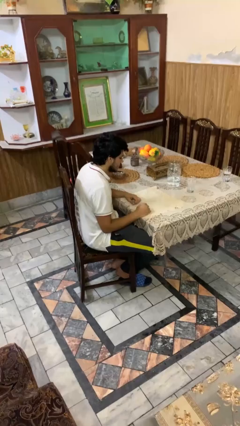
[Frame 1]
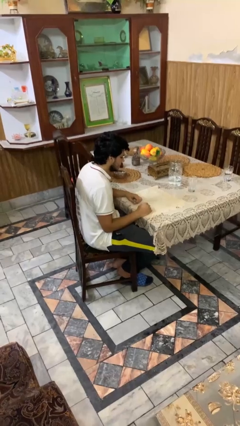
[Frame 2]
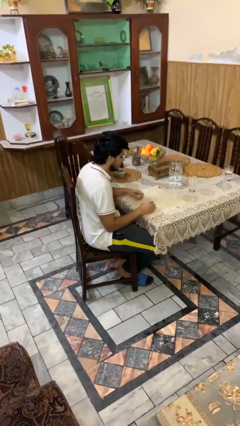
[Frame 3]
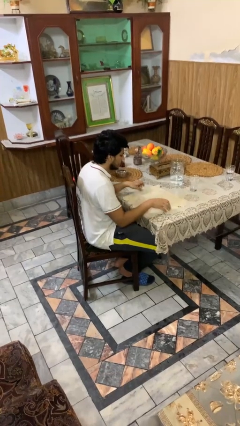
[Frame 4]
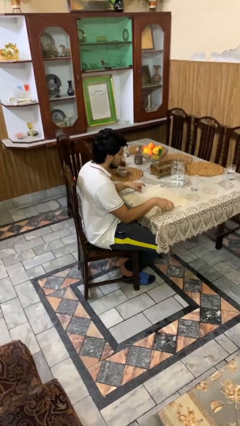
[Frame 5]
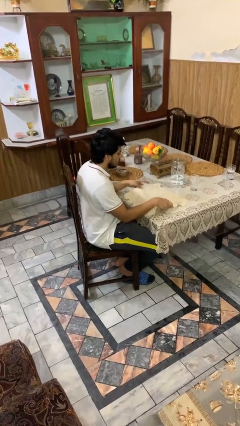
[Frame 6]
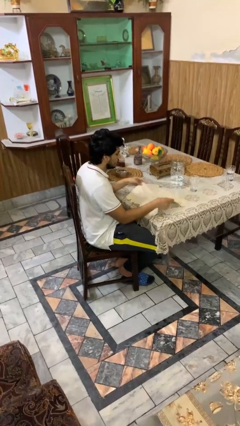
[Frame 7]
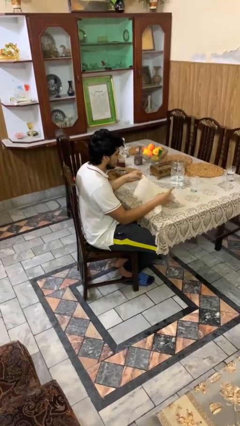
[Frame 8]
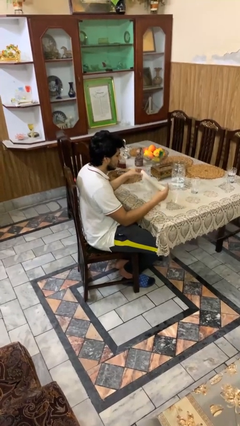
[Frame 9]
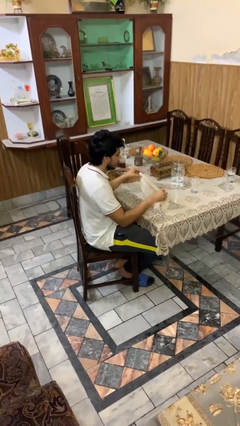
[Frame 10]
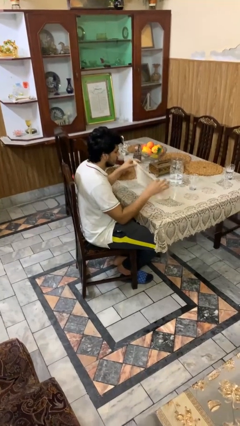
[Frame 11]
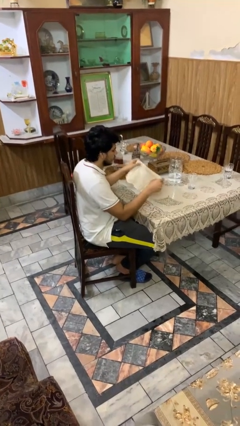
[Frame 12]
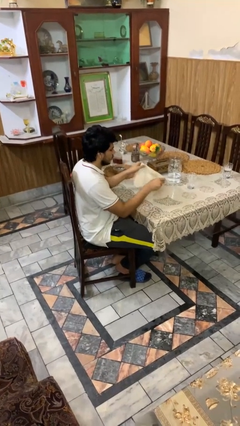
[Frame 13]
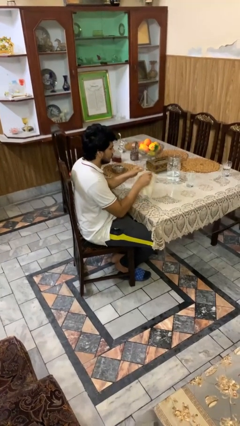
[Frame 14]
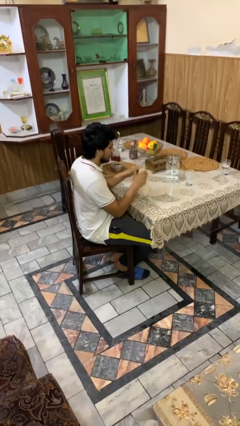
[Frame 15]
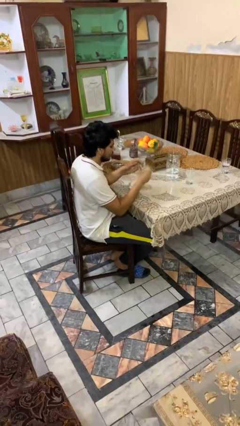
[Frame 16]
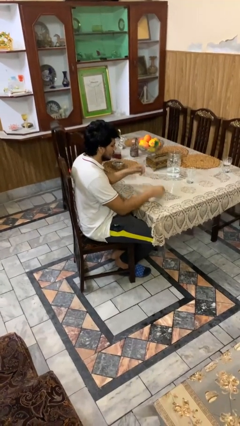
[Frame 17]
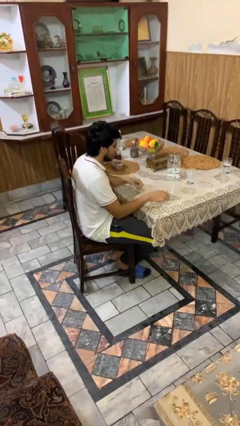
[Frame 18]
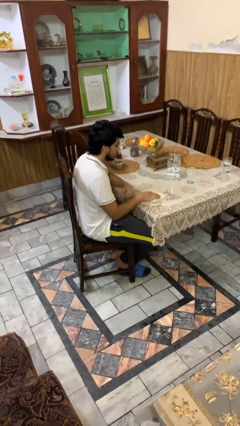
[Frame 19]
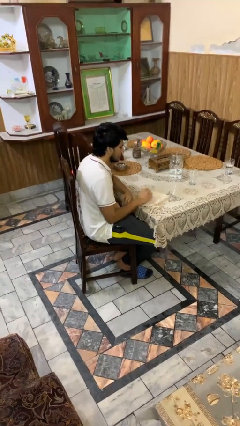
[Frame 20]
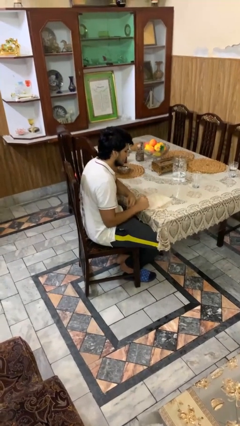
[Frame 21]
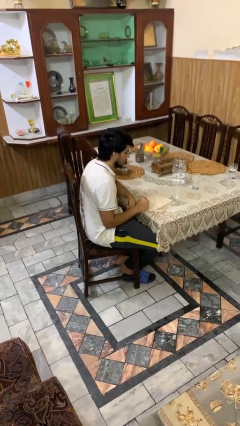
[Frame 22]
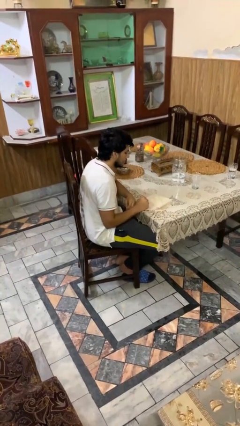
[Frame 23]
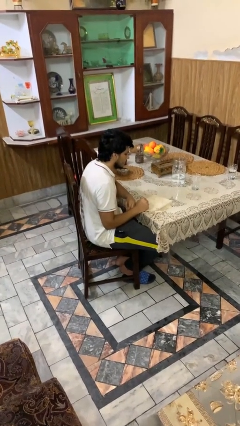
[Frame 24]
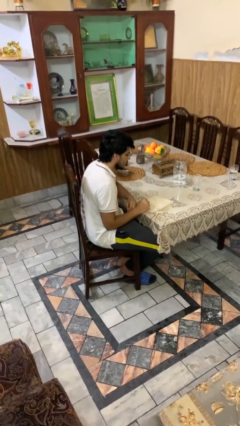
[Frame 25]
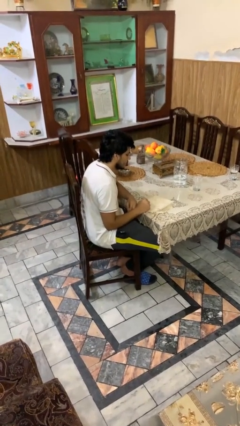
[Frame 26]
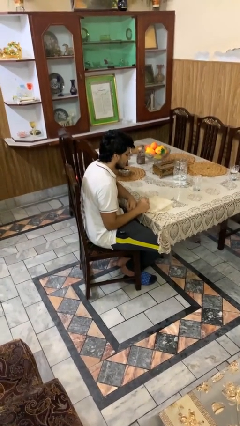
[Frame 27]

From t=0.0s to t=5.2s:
person folds tablecloth

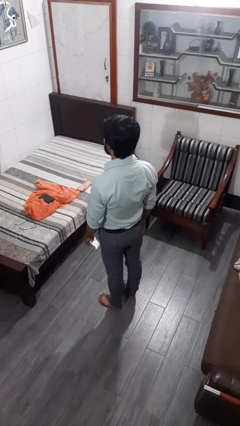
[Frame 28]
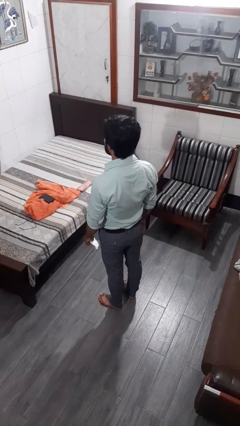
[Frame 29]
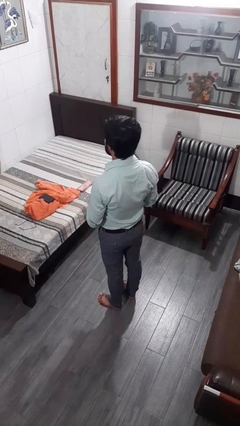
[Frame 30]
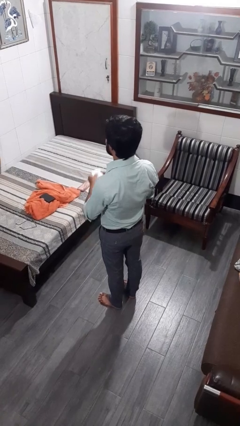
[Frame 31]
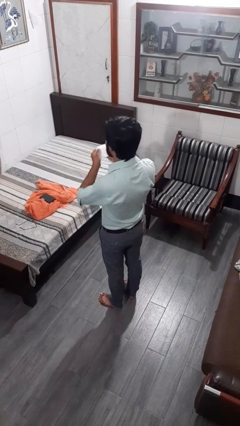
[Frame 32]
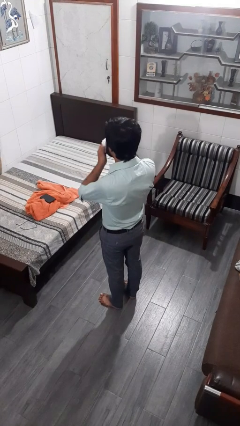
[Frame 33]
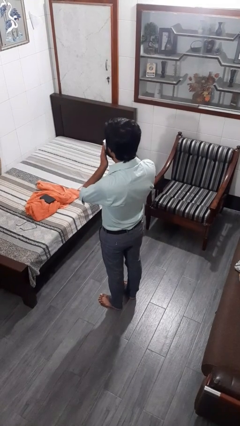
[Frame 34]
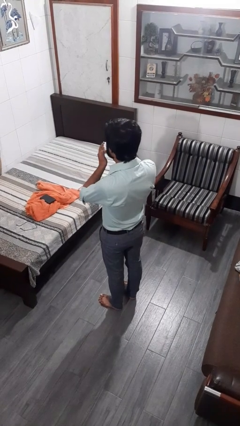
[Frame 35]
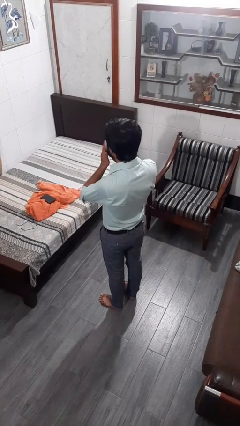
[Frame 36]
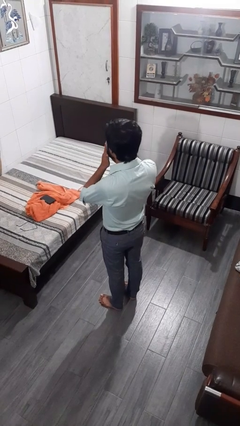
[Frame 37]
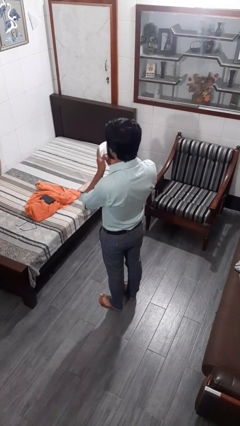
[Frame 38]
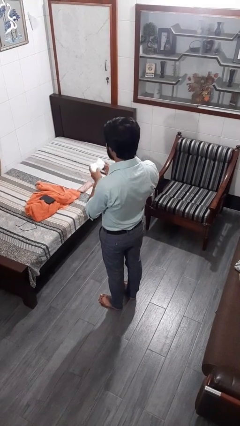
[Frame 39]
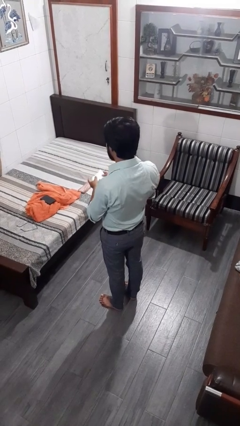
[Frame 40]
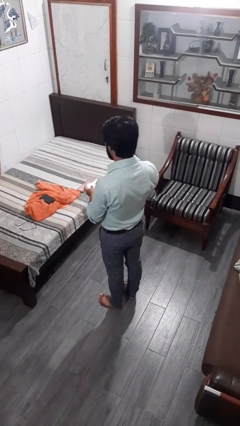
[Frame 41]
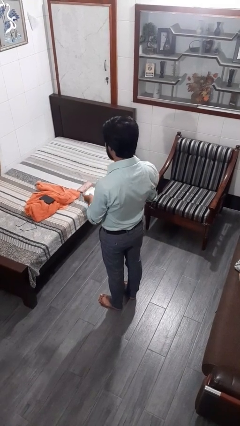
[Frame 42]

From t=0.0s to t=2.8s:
person blows nose

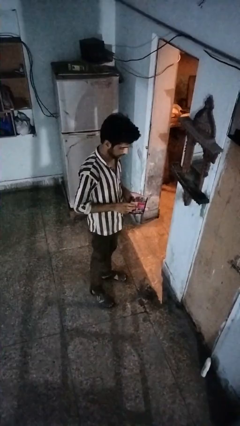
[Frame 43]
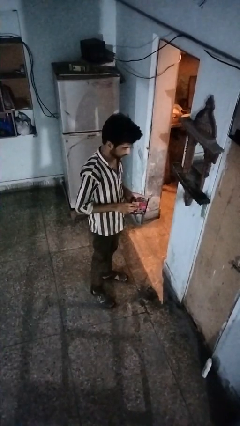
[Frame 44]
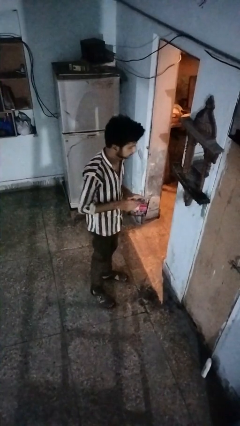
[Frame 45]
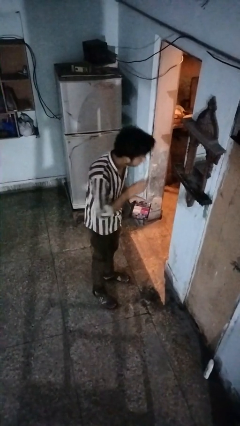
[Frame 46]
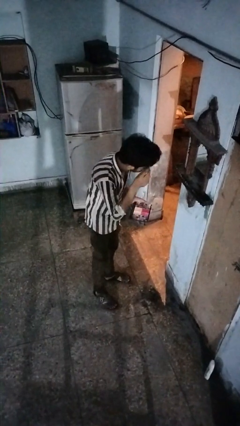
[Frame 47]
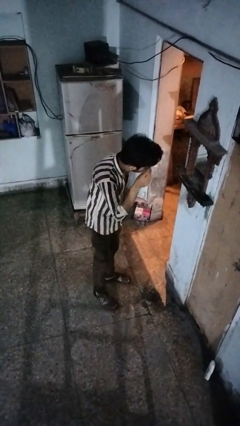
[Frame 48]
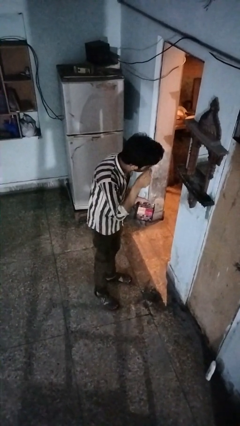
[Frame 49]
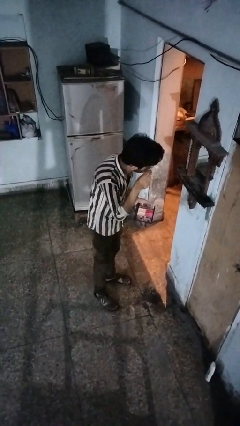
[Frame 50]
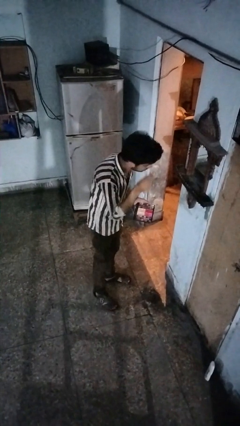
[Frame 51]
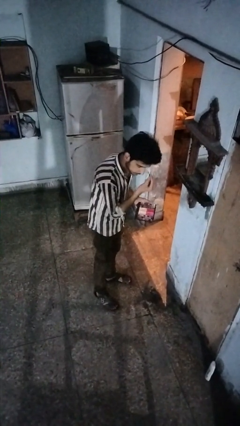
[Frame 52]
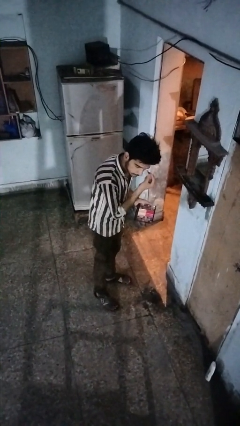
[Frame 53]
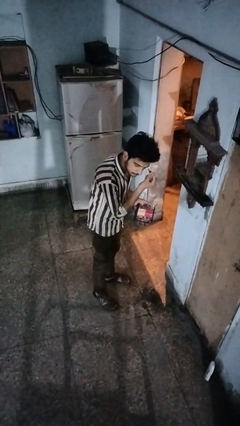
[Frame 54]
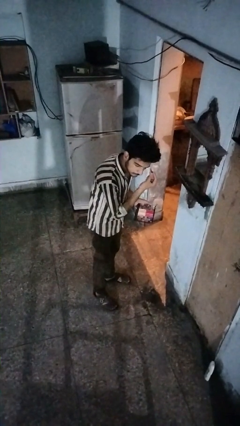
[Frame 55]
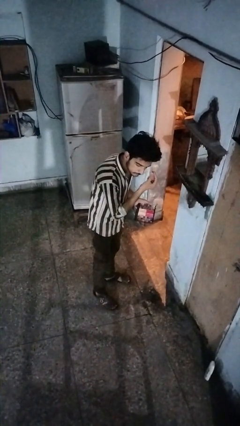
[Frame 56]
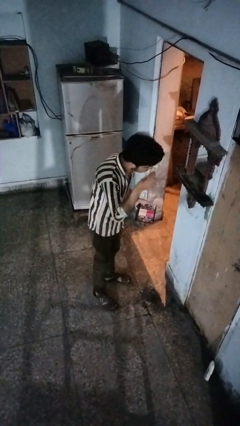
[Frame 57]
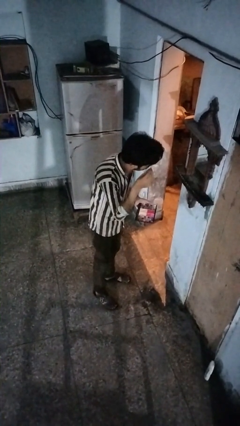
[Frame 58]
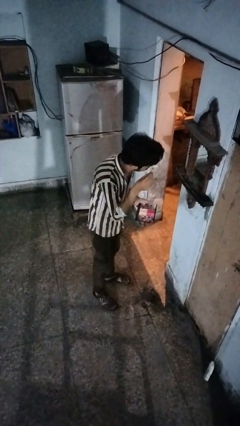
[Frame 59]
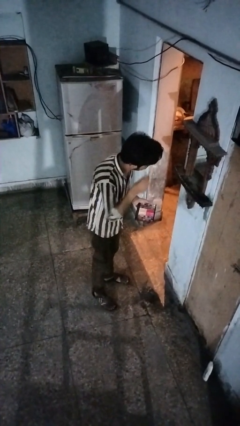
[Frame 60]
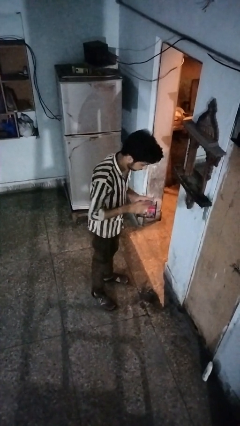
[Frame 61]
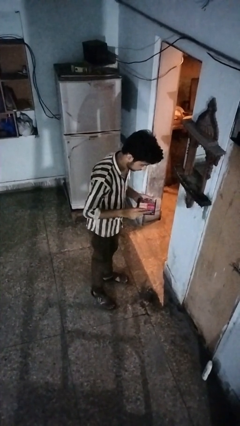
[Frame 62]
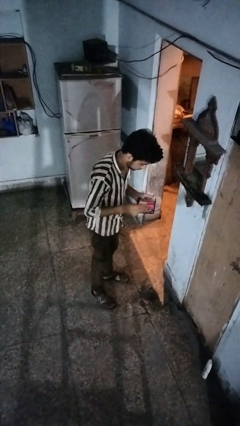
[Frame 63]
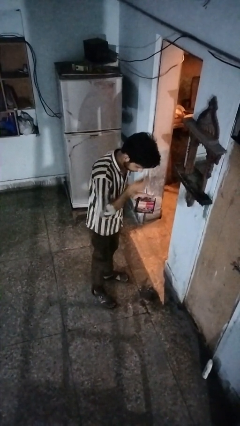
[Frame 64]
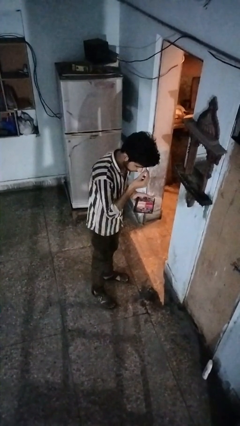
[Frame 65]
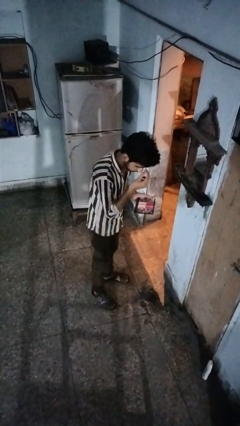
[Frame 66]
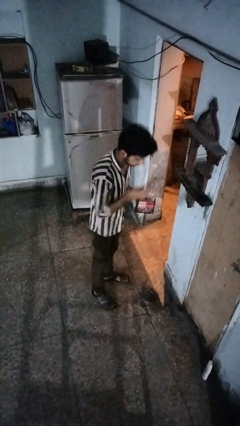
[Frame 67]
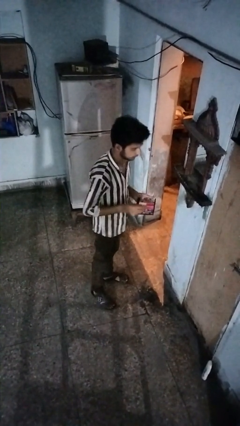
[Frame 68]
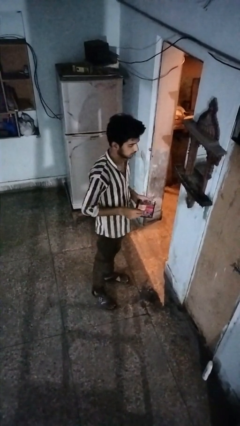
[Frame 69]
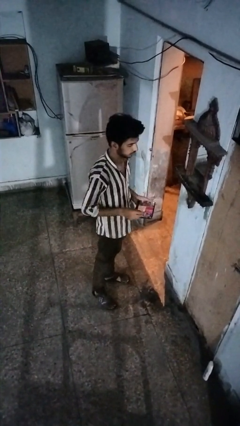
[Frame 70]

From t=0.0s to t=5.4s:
person applies eye makeup

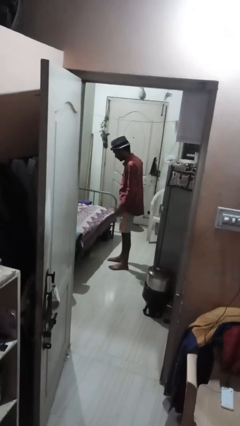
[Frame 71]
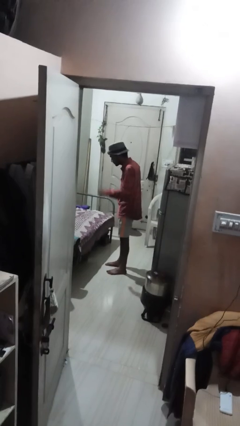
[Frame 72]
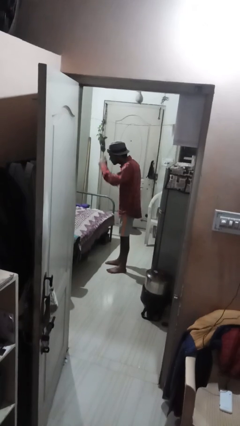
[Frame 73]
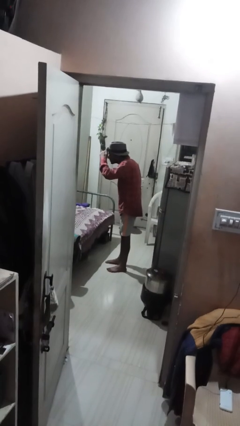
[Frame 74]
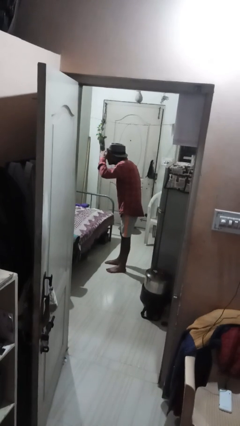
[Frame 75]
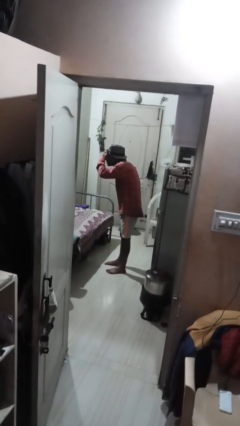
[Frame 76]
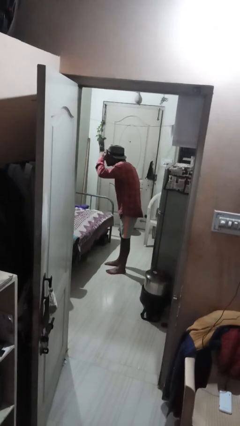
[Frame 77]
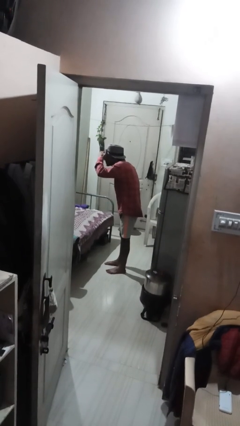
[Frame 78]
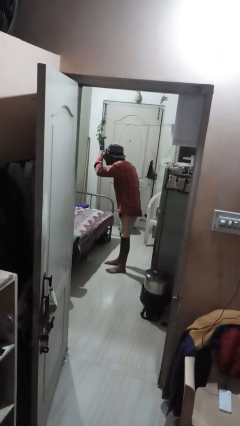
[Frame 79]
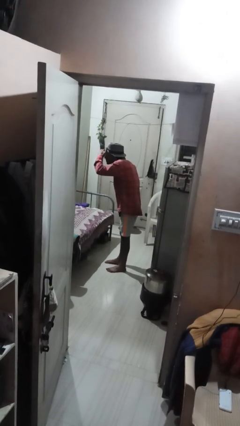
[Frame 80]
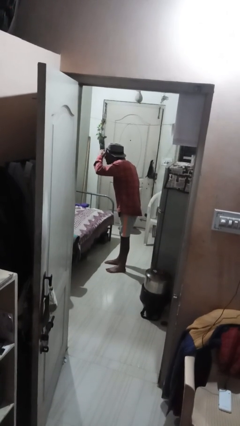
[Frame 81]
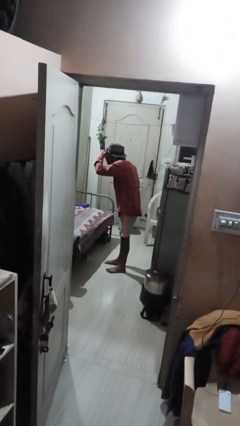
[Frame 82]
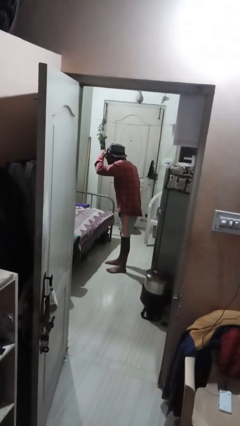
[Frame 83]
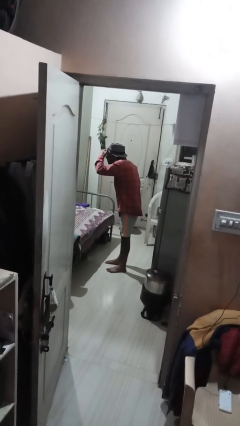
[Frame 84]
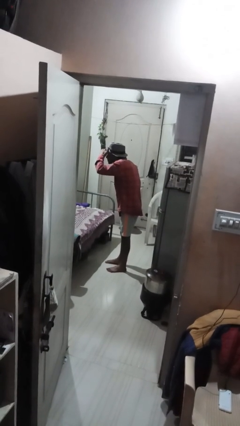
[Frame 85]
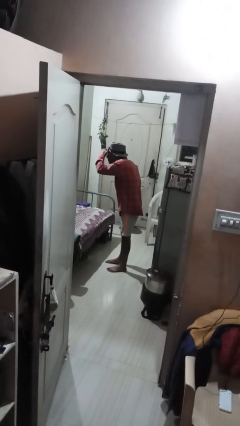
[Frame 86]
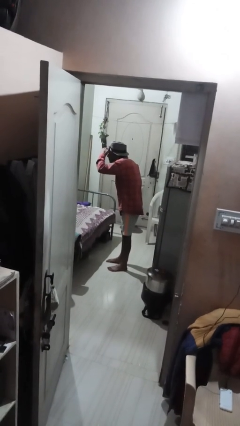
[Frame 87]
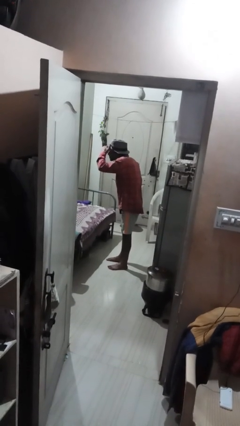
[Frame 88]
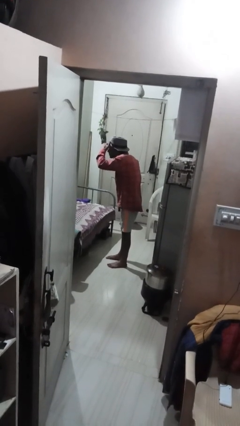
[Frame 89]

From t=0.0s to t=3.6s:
person shades eyes

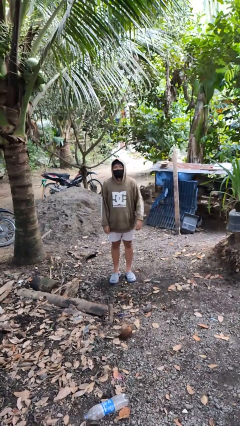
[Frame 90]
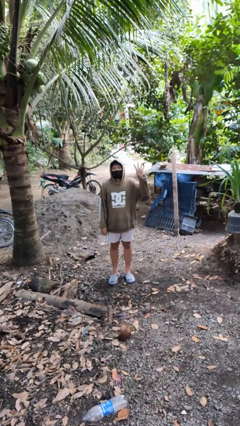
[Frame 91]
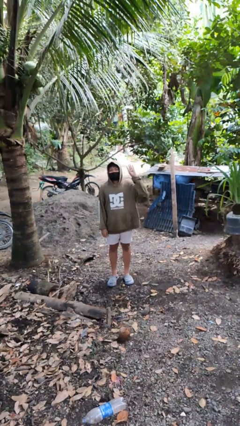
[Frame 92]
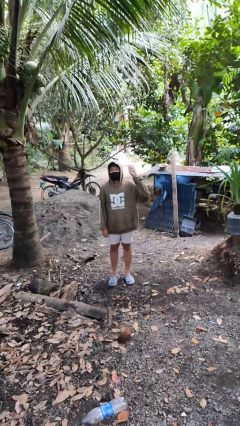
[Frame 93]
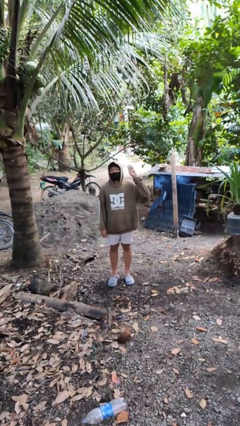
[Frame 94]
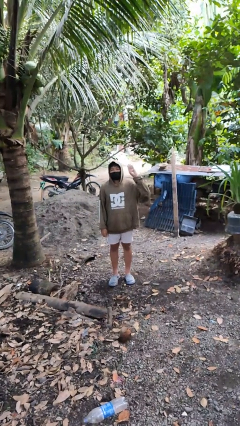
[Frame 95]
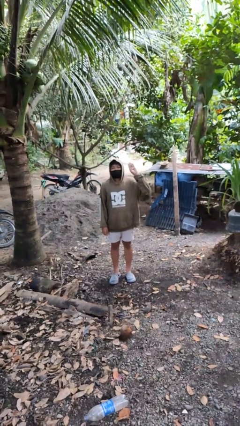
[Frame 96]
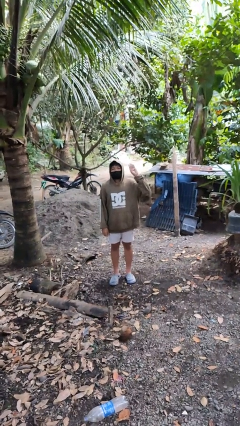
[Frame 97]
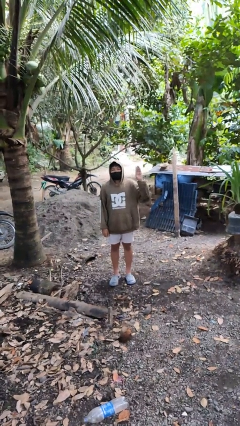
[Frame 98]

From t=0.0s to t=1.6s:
person gestures number four
